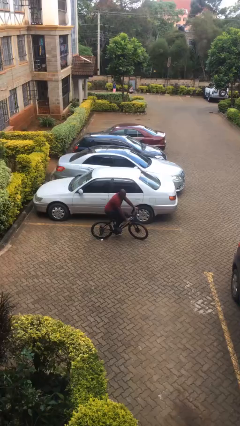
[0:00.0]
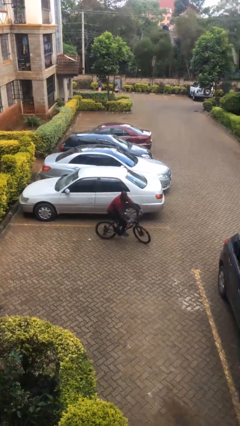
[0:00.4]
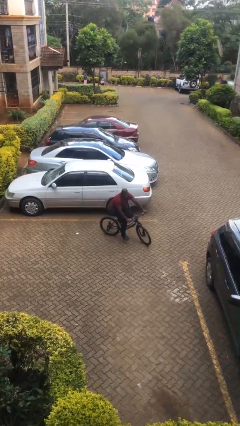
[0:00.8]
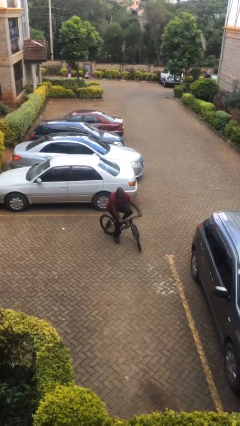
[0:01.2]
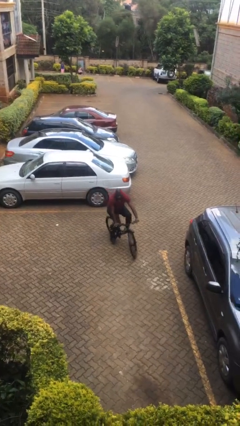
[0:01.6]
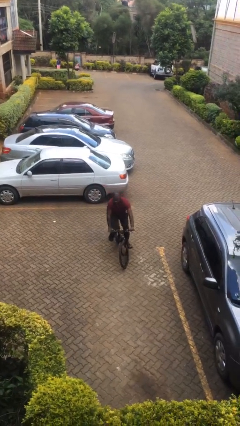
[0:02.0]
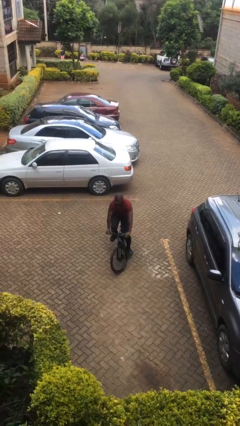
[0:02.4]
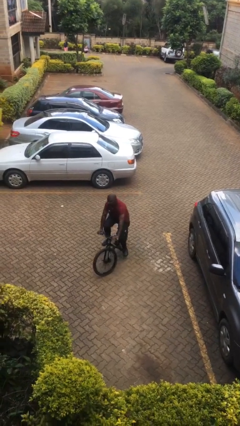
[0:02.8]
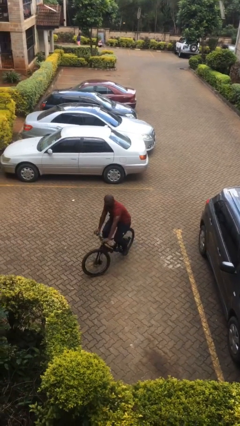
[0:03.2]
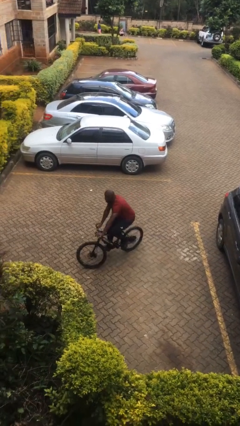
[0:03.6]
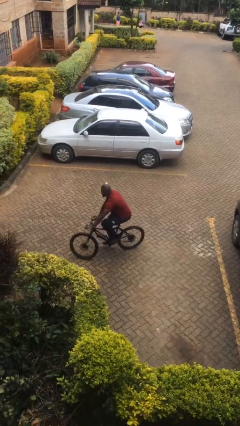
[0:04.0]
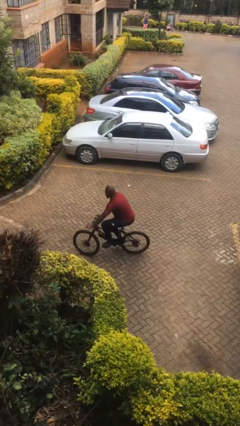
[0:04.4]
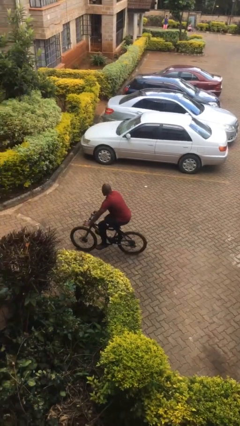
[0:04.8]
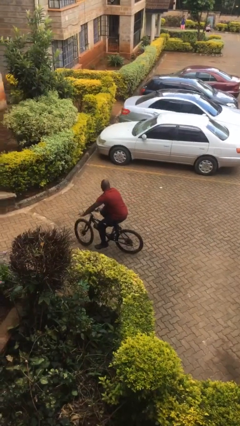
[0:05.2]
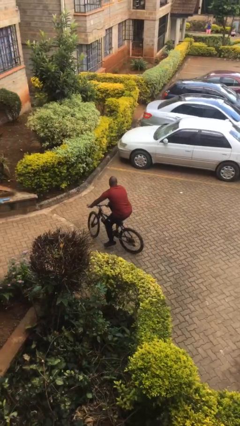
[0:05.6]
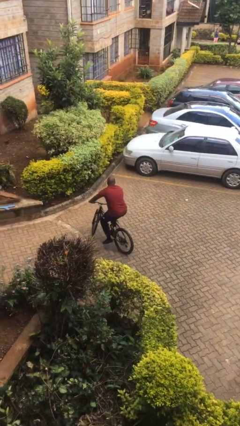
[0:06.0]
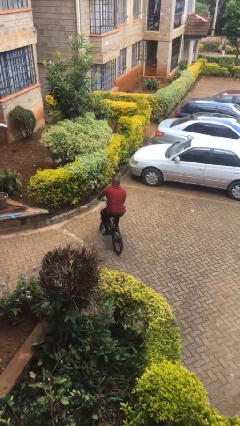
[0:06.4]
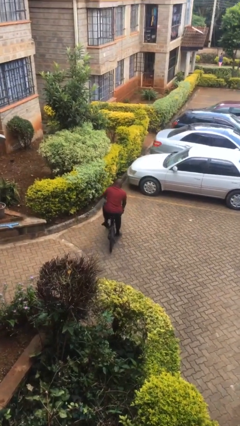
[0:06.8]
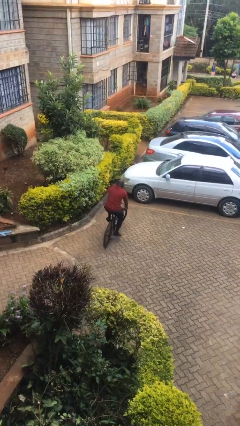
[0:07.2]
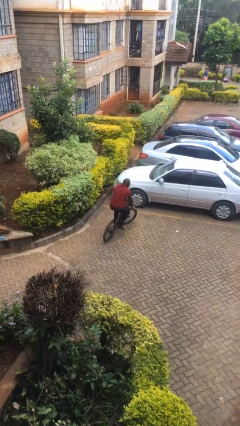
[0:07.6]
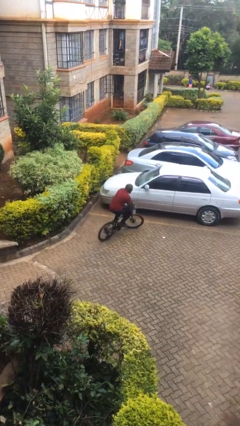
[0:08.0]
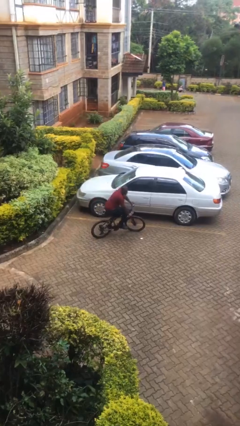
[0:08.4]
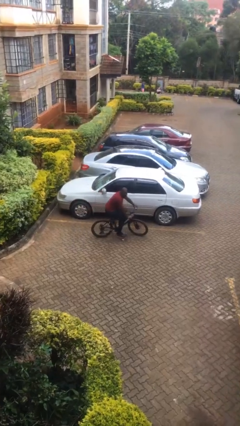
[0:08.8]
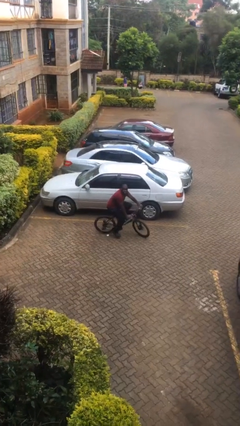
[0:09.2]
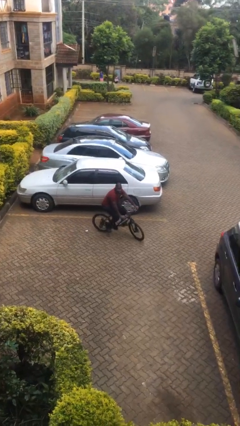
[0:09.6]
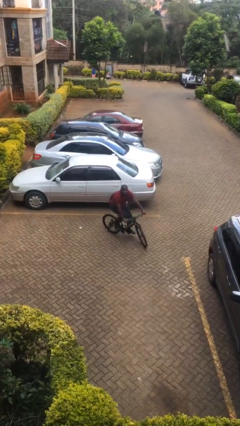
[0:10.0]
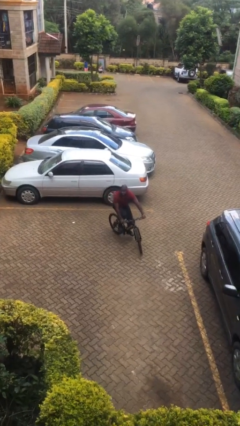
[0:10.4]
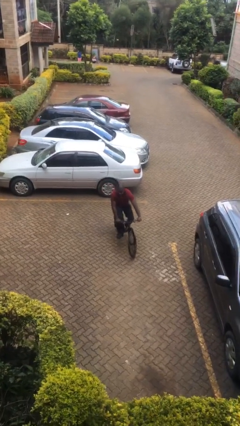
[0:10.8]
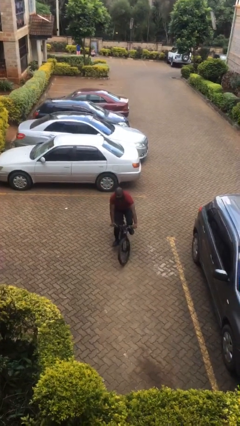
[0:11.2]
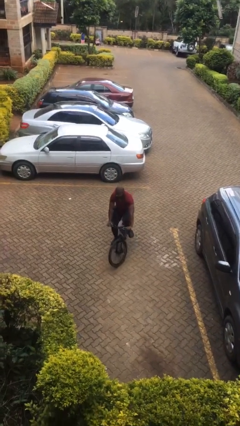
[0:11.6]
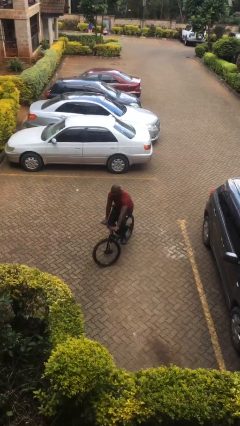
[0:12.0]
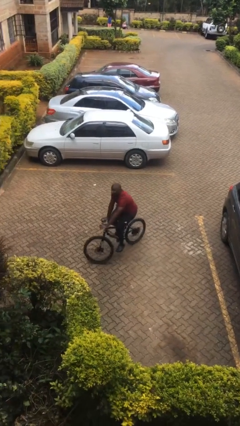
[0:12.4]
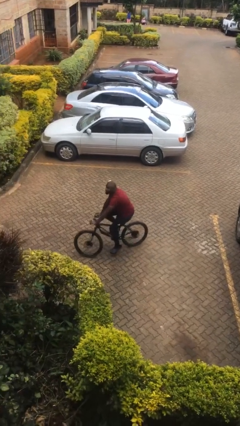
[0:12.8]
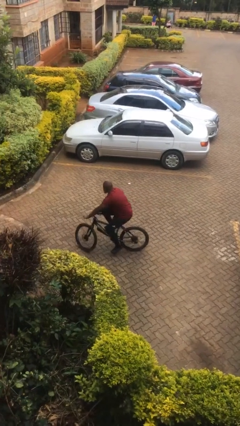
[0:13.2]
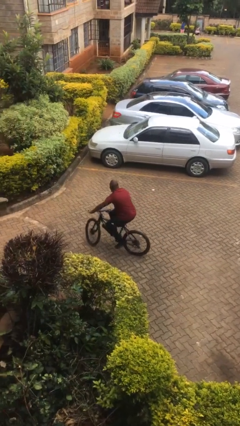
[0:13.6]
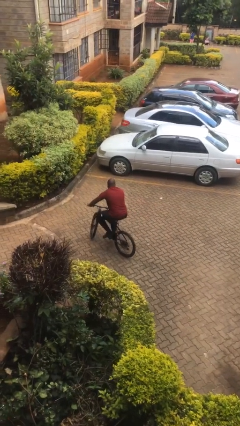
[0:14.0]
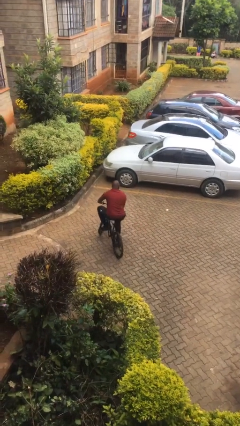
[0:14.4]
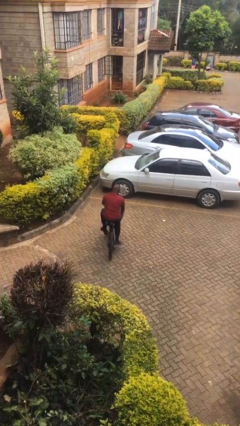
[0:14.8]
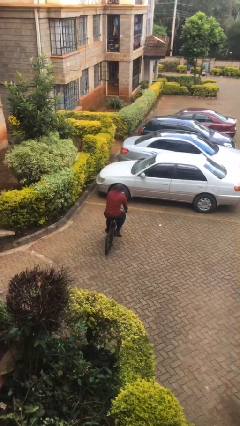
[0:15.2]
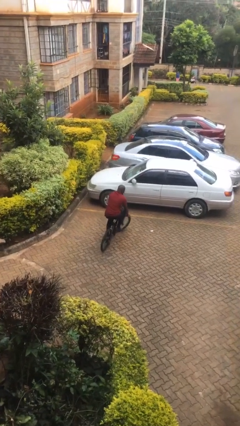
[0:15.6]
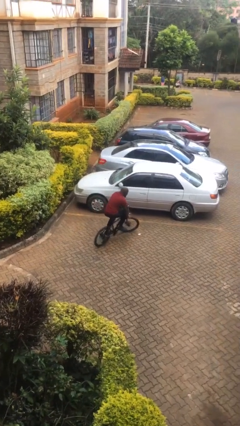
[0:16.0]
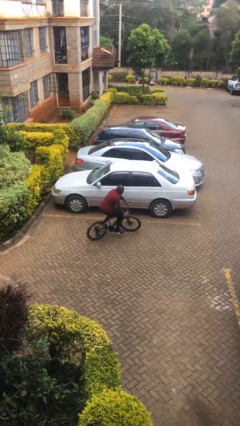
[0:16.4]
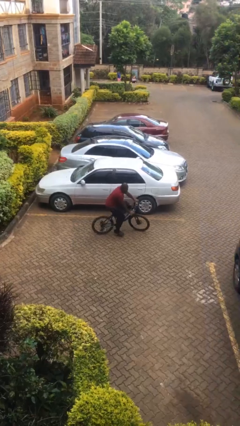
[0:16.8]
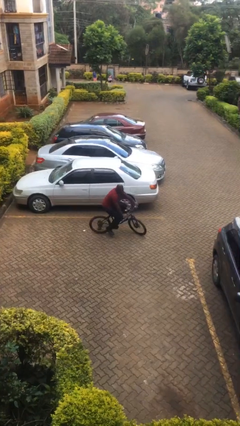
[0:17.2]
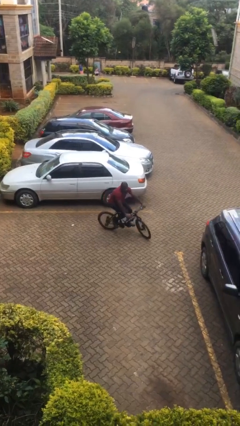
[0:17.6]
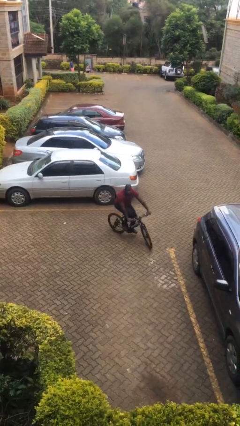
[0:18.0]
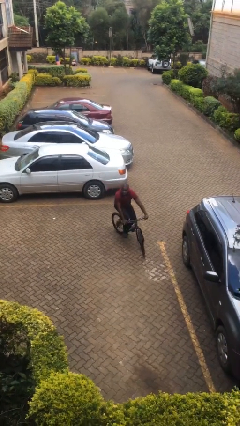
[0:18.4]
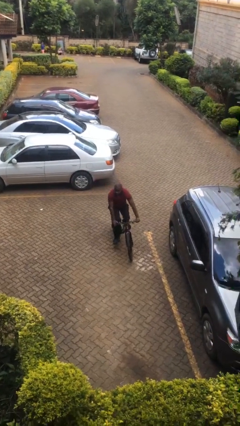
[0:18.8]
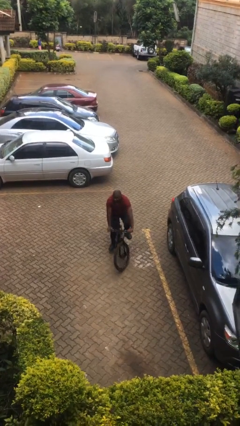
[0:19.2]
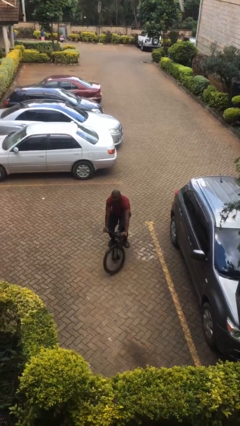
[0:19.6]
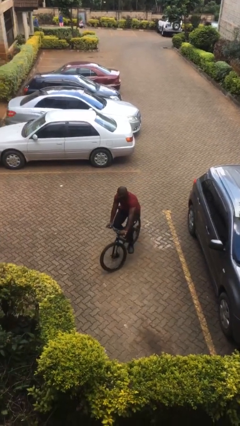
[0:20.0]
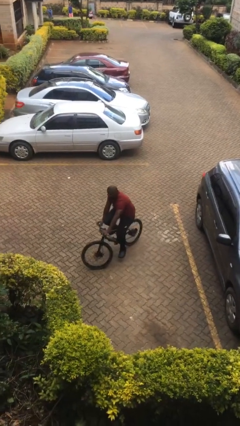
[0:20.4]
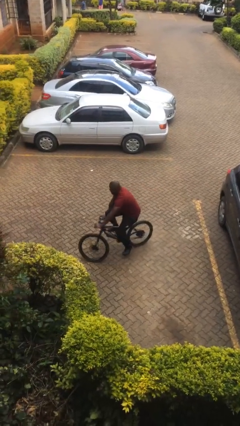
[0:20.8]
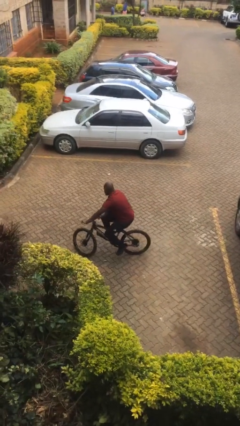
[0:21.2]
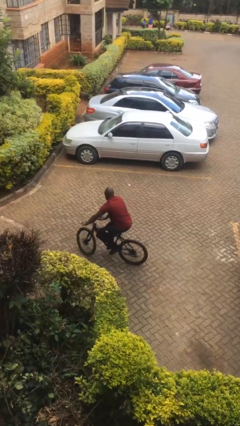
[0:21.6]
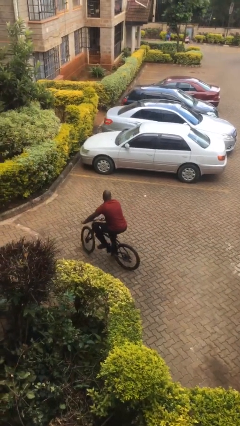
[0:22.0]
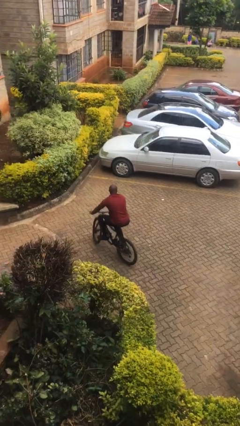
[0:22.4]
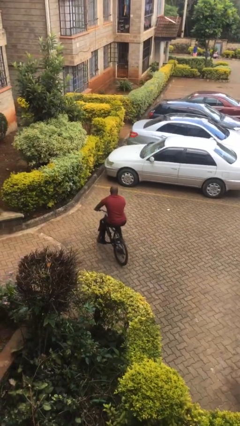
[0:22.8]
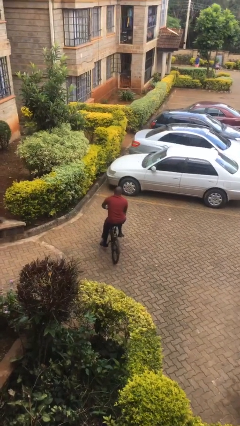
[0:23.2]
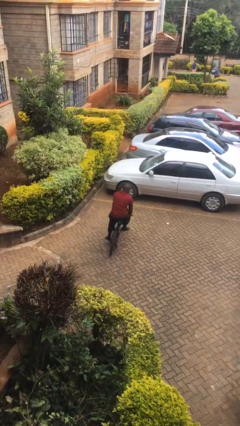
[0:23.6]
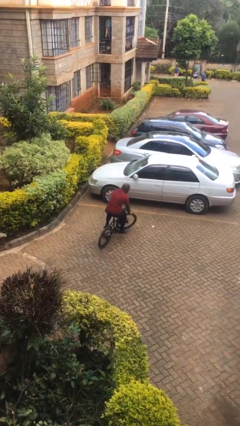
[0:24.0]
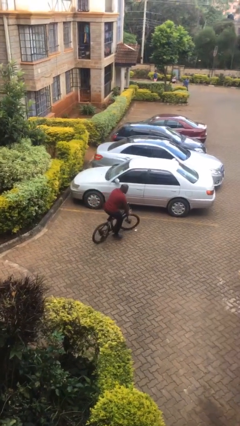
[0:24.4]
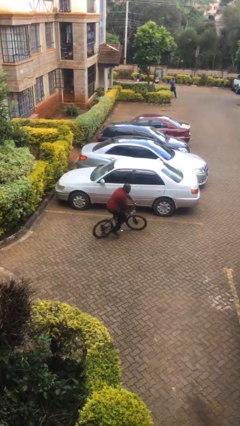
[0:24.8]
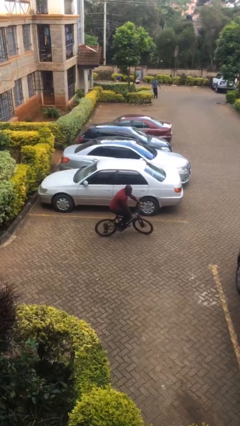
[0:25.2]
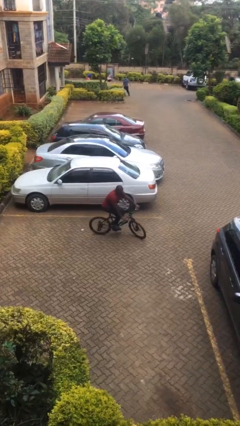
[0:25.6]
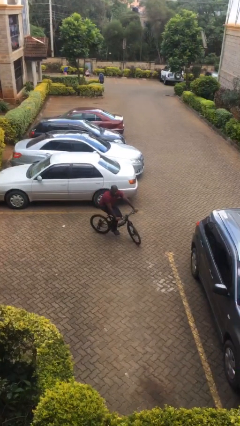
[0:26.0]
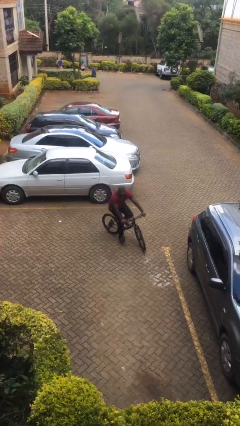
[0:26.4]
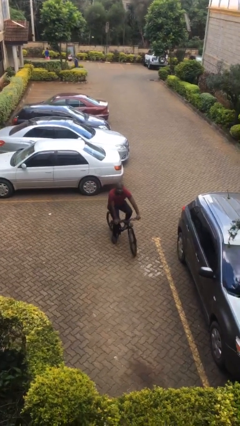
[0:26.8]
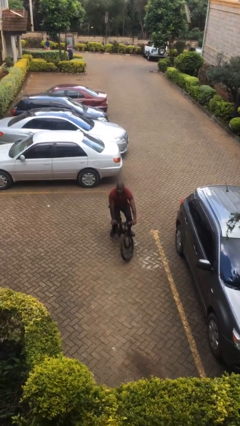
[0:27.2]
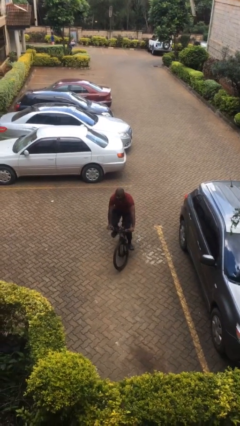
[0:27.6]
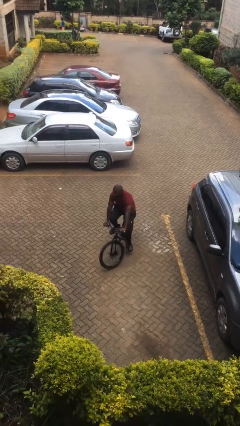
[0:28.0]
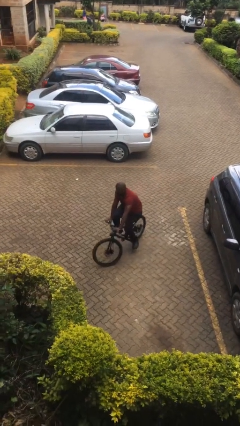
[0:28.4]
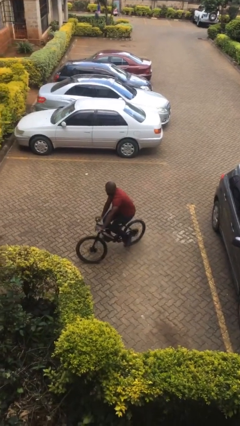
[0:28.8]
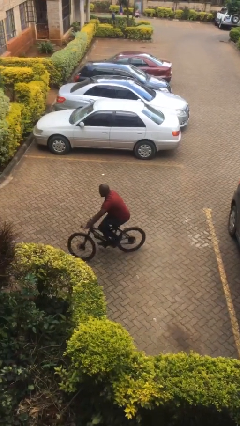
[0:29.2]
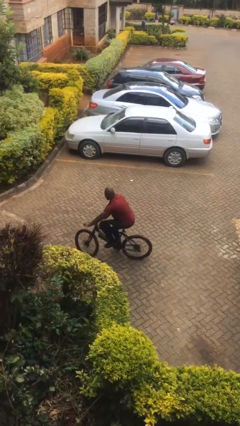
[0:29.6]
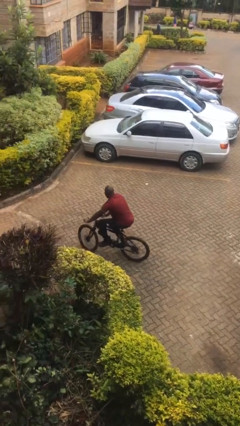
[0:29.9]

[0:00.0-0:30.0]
person rides bicycle

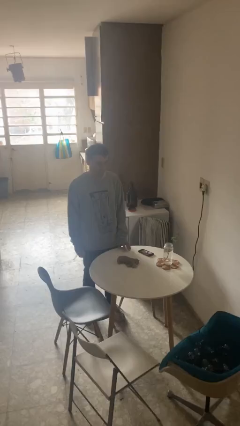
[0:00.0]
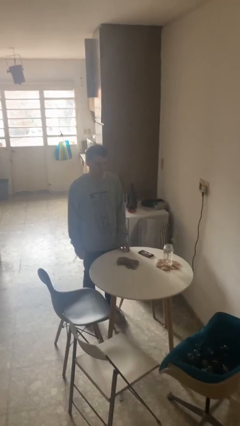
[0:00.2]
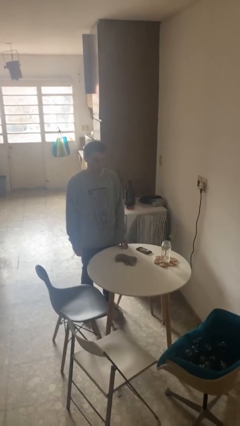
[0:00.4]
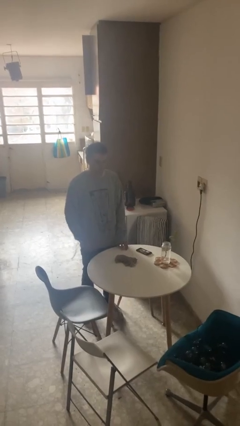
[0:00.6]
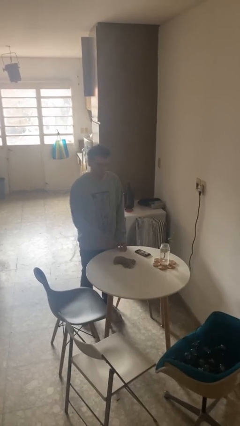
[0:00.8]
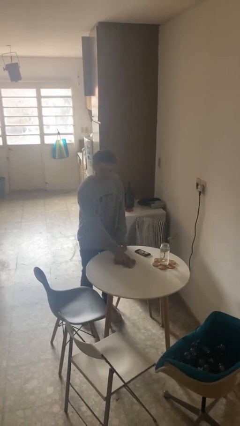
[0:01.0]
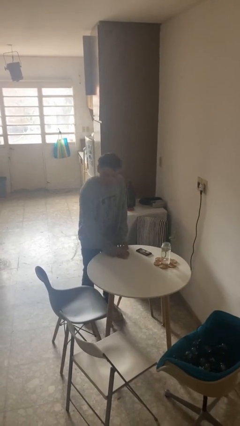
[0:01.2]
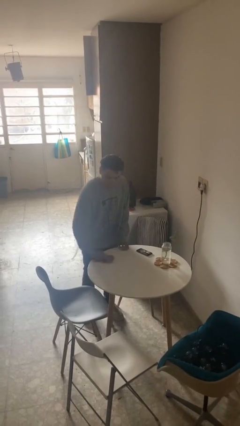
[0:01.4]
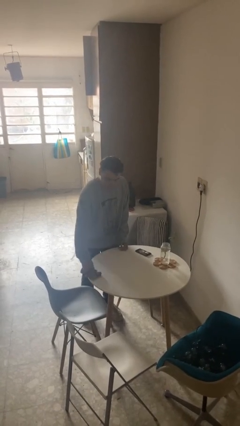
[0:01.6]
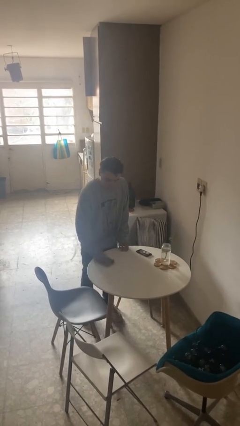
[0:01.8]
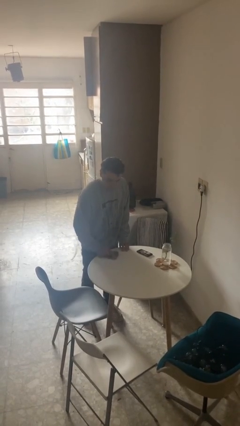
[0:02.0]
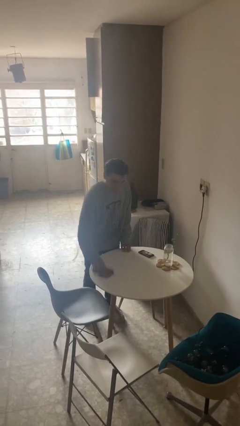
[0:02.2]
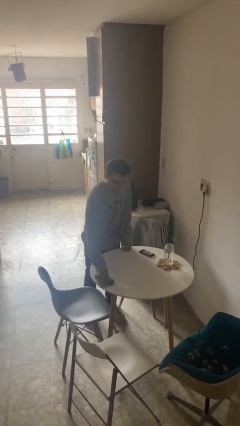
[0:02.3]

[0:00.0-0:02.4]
person cleans table with rag

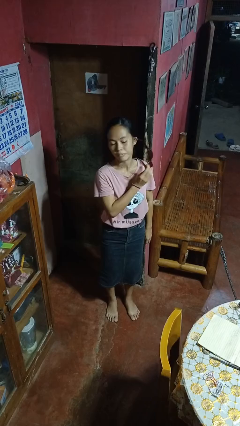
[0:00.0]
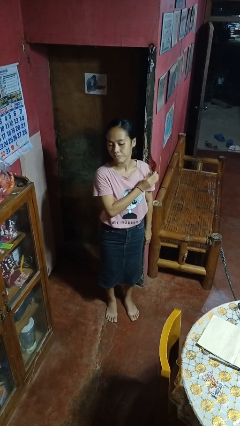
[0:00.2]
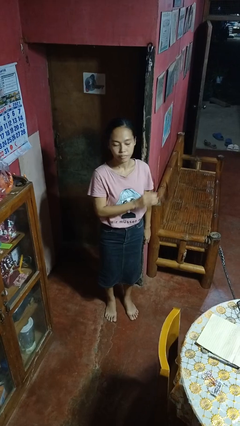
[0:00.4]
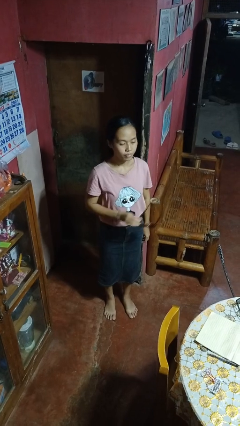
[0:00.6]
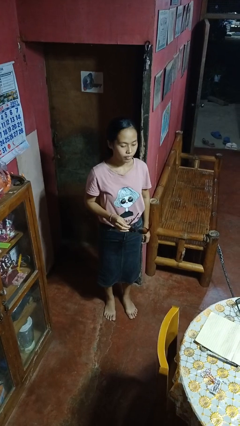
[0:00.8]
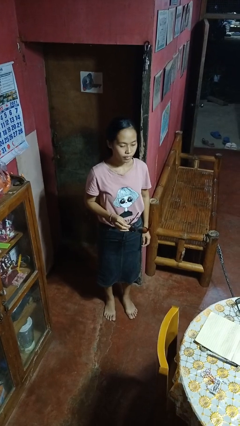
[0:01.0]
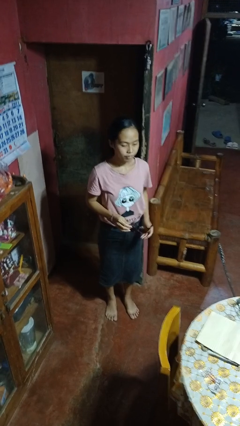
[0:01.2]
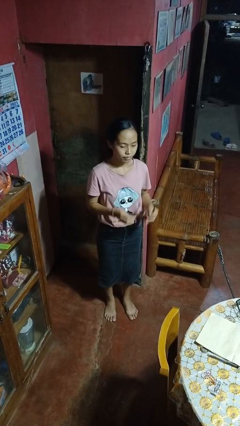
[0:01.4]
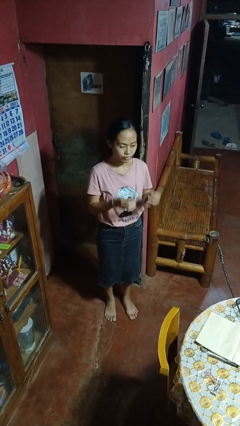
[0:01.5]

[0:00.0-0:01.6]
person takes off sunglasses
